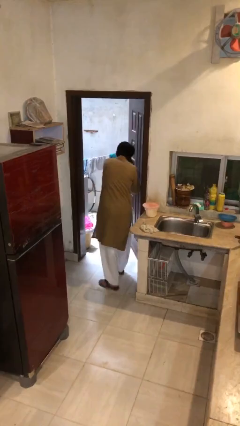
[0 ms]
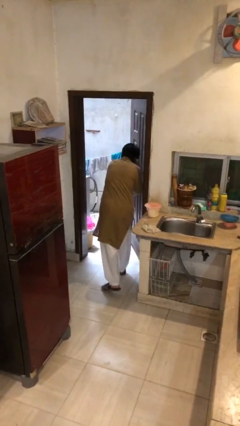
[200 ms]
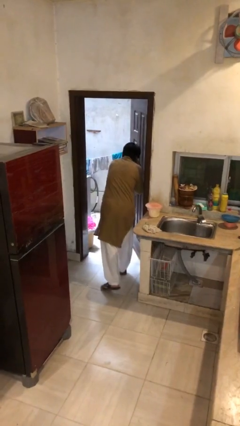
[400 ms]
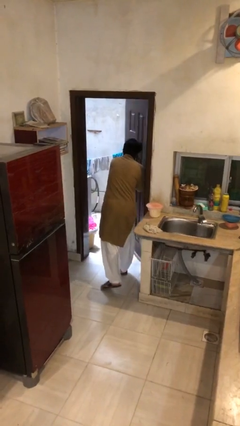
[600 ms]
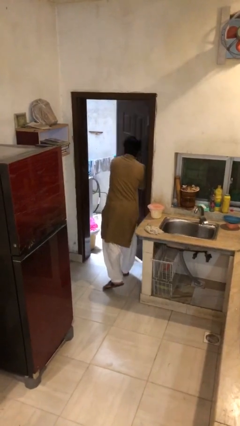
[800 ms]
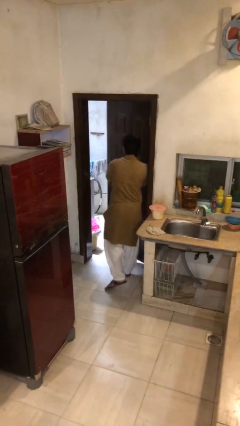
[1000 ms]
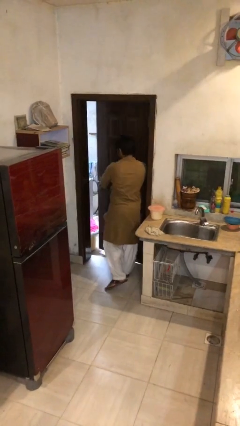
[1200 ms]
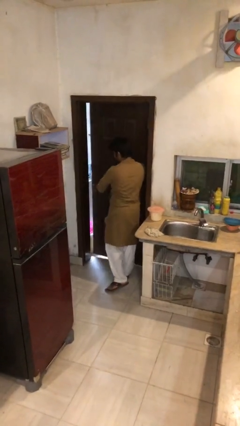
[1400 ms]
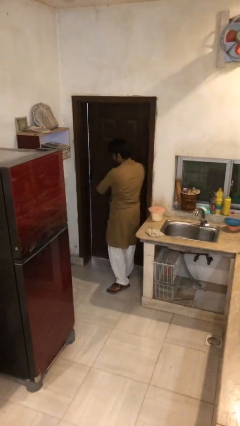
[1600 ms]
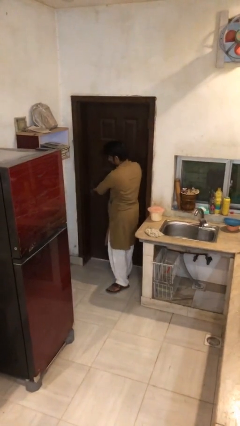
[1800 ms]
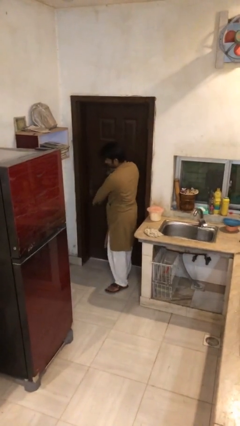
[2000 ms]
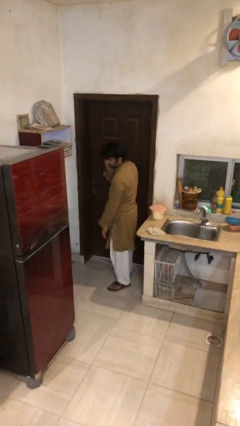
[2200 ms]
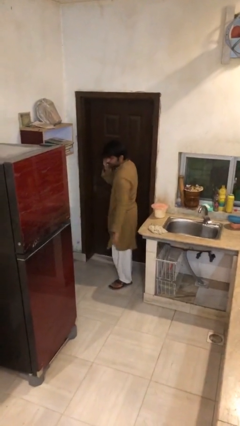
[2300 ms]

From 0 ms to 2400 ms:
person closes facility door

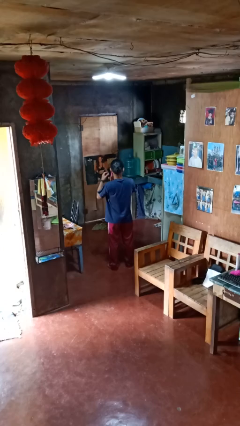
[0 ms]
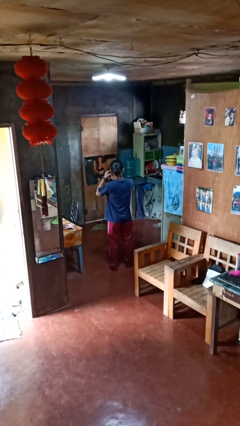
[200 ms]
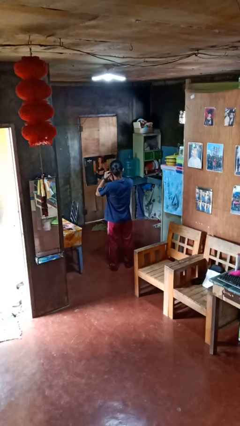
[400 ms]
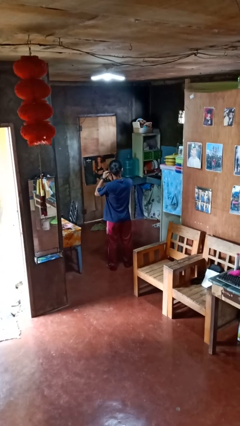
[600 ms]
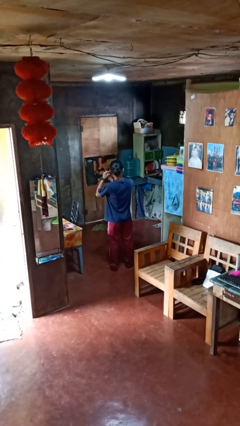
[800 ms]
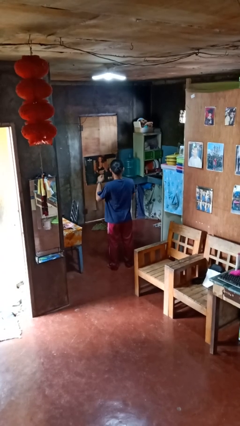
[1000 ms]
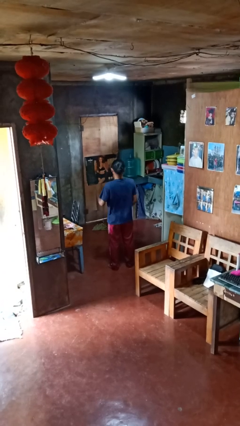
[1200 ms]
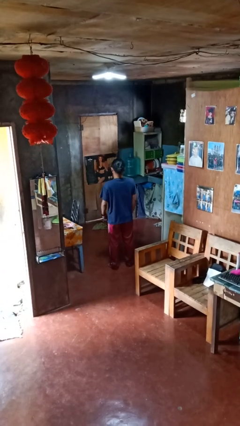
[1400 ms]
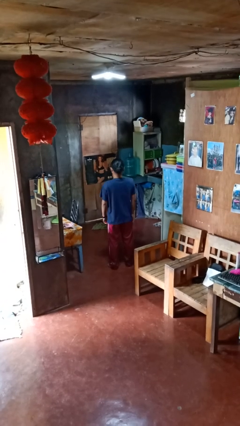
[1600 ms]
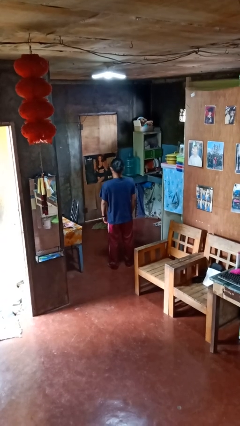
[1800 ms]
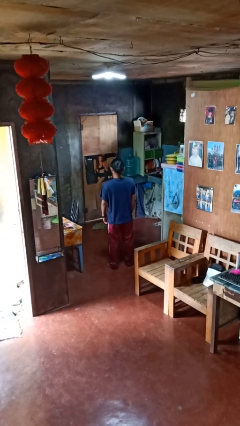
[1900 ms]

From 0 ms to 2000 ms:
person takes off earrings

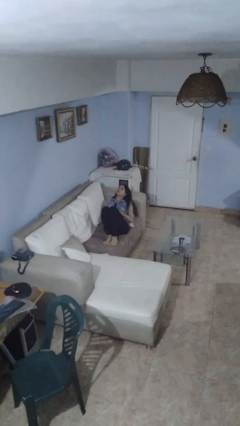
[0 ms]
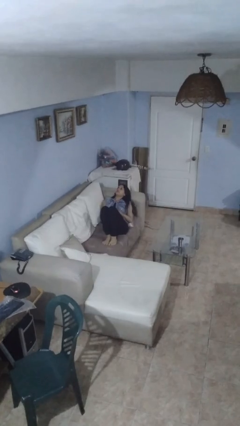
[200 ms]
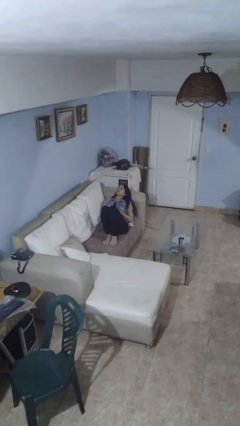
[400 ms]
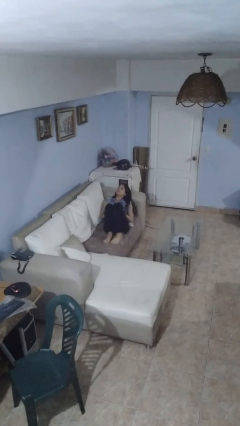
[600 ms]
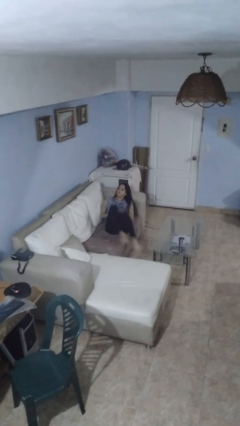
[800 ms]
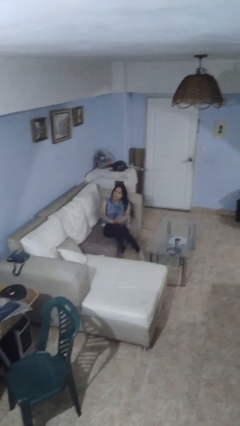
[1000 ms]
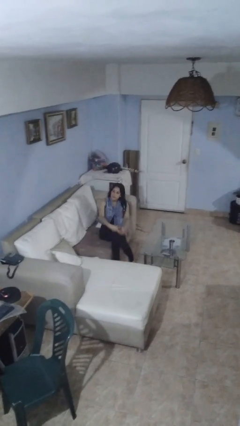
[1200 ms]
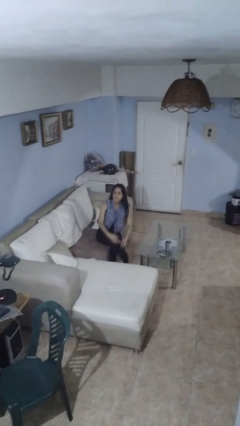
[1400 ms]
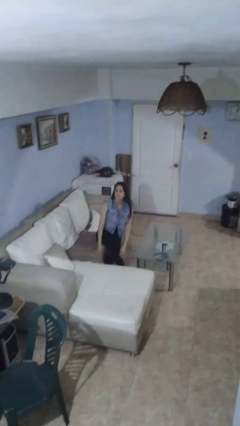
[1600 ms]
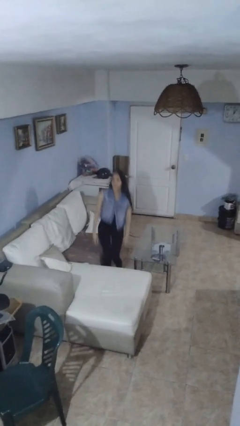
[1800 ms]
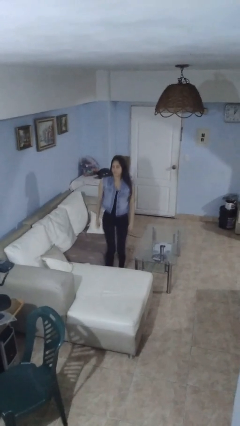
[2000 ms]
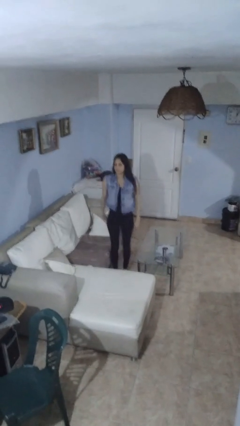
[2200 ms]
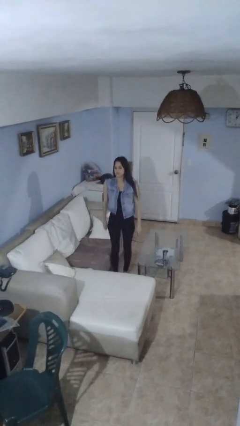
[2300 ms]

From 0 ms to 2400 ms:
person stands up

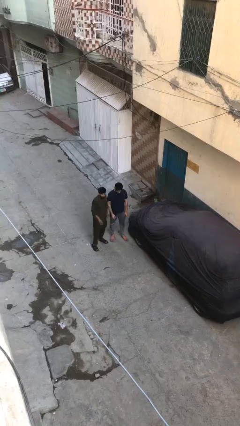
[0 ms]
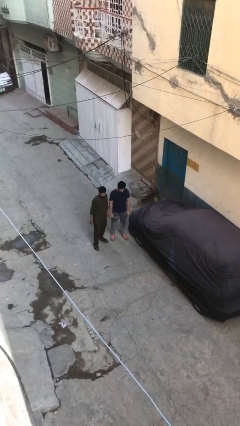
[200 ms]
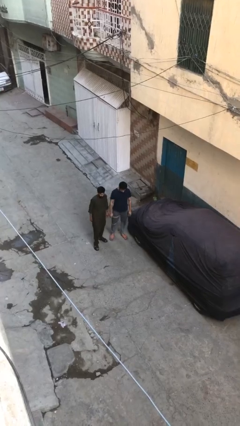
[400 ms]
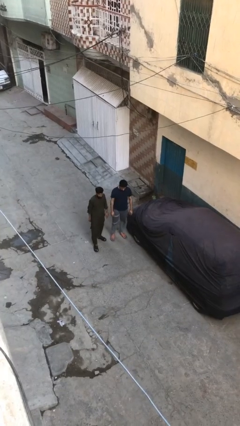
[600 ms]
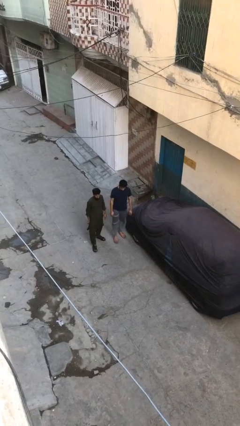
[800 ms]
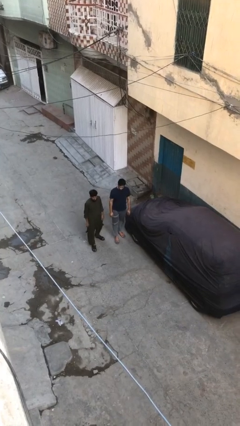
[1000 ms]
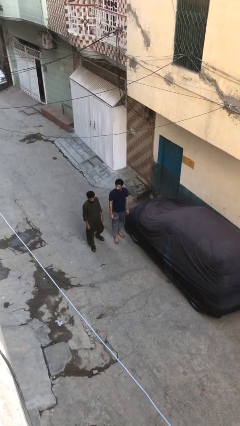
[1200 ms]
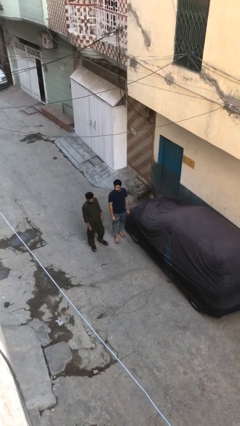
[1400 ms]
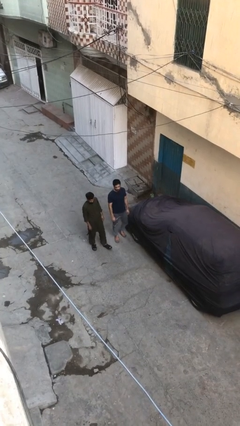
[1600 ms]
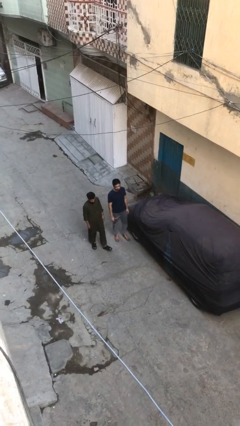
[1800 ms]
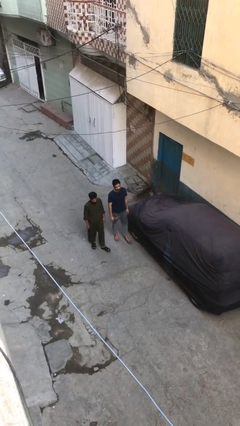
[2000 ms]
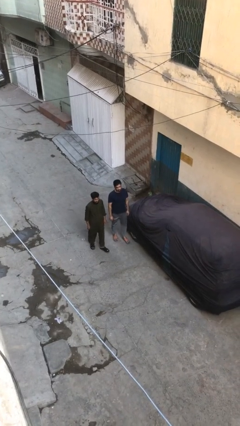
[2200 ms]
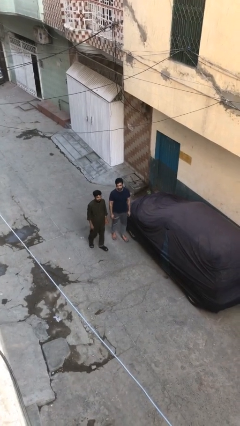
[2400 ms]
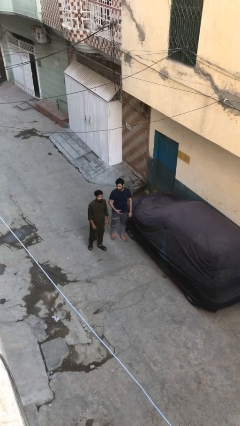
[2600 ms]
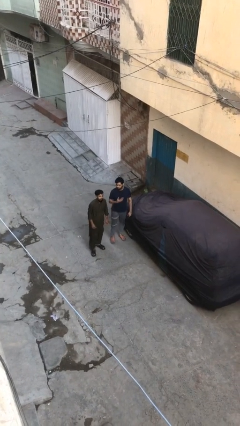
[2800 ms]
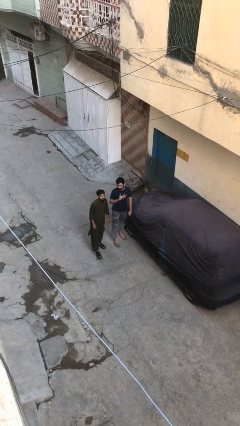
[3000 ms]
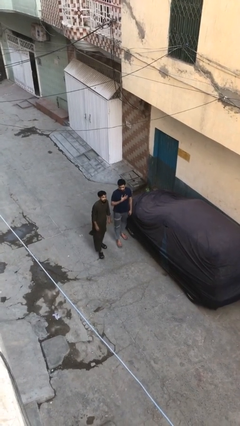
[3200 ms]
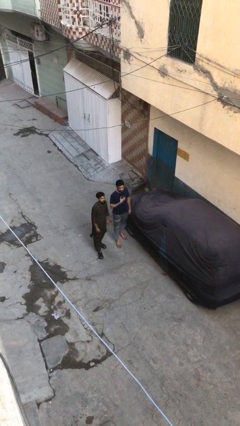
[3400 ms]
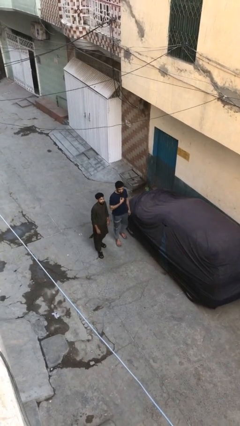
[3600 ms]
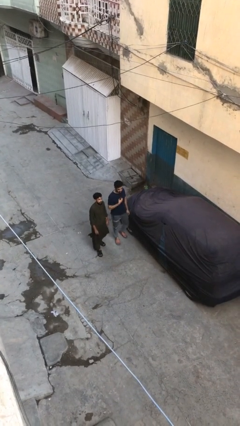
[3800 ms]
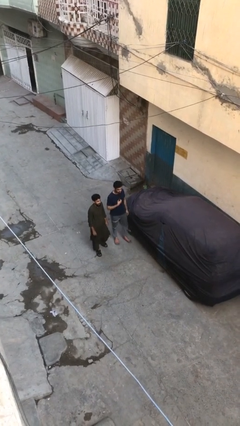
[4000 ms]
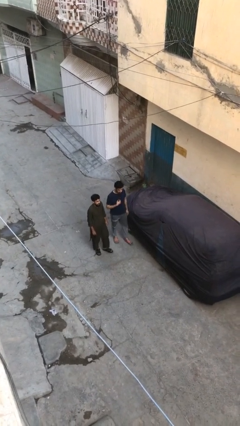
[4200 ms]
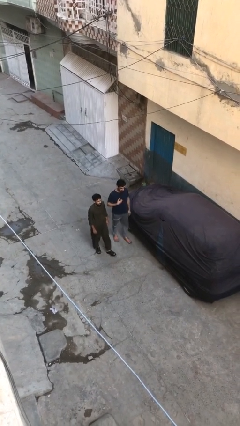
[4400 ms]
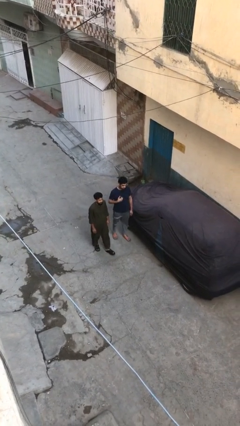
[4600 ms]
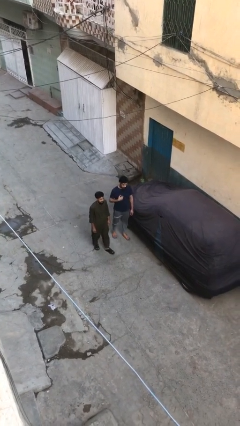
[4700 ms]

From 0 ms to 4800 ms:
person talks to person

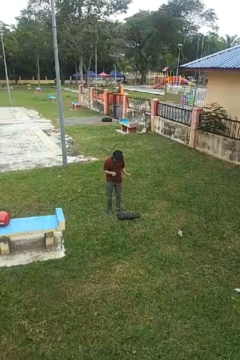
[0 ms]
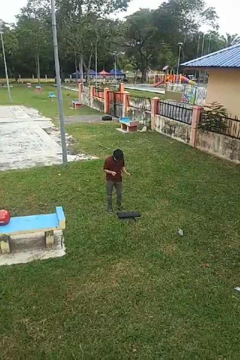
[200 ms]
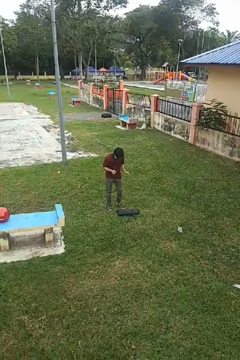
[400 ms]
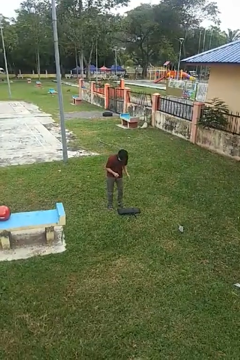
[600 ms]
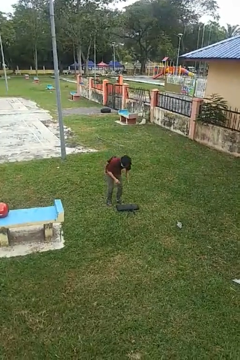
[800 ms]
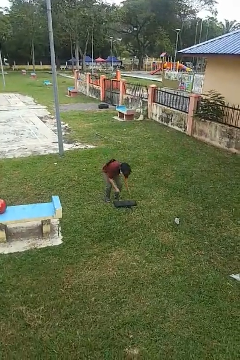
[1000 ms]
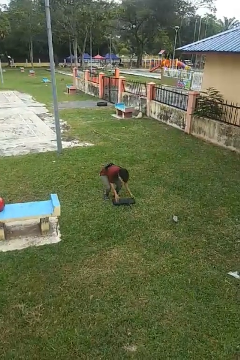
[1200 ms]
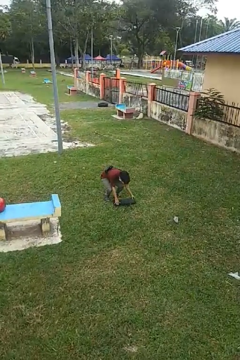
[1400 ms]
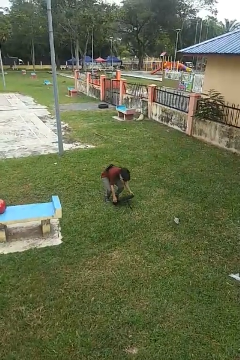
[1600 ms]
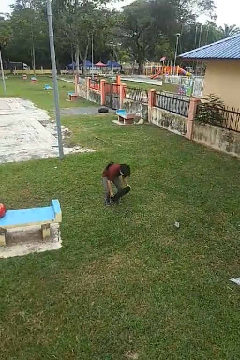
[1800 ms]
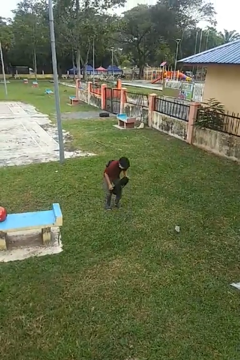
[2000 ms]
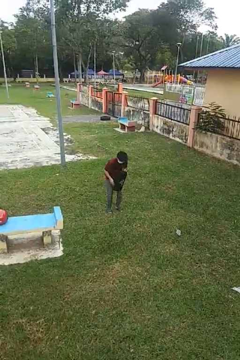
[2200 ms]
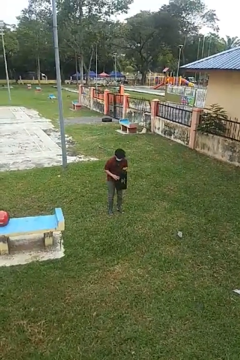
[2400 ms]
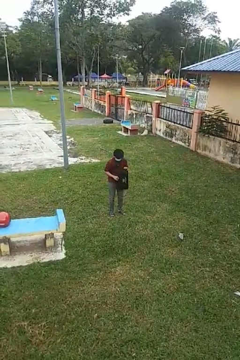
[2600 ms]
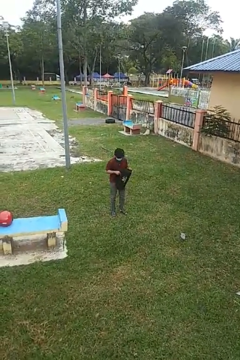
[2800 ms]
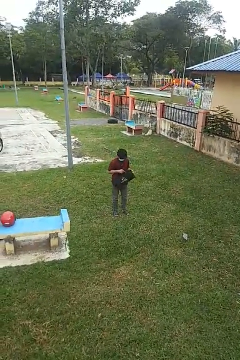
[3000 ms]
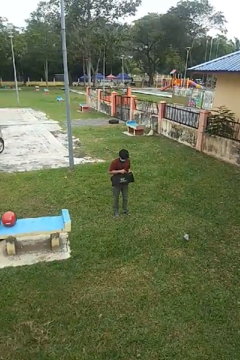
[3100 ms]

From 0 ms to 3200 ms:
person picks up object from floor

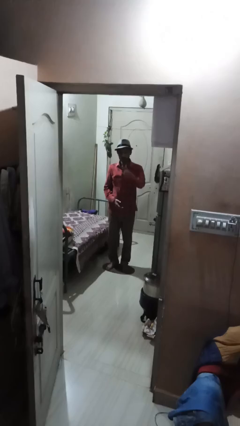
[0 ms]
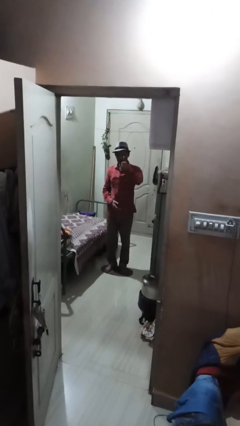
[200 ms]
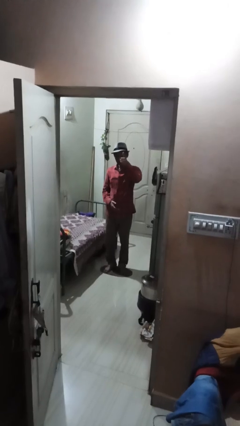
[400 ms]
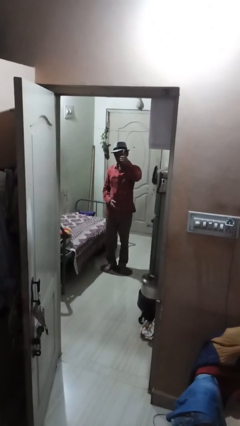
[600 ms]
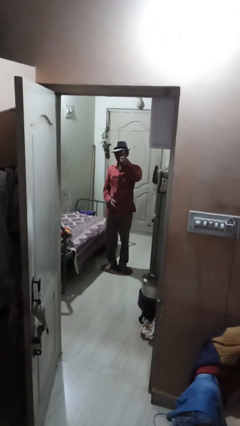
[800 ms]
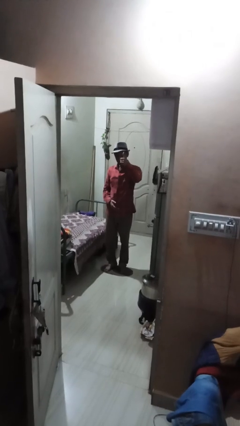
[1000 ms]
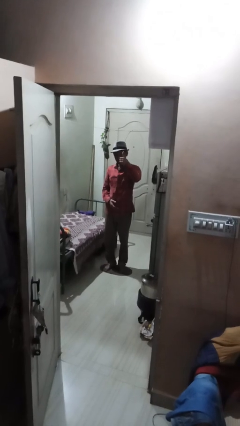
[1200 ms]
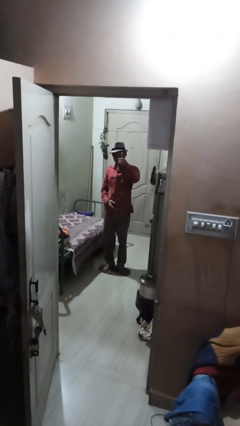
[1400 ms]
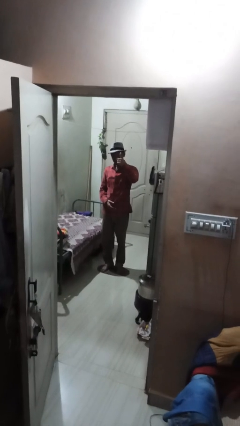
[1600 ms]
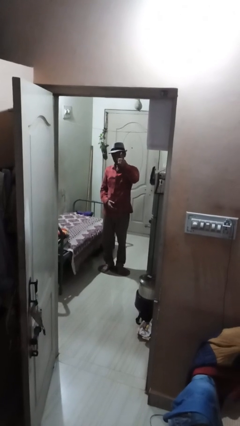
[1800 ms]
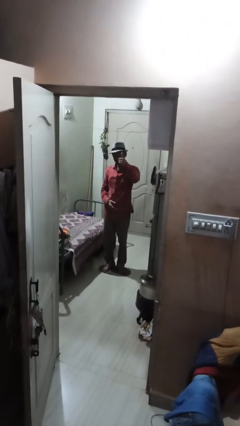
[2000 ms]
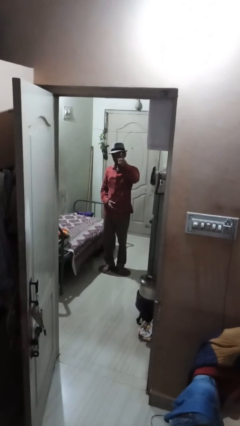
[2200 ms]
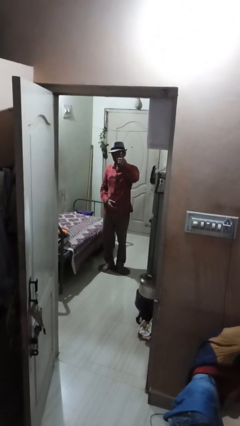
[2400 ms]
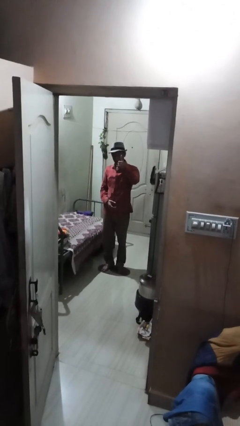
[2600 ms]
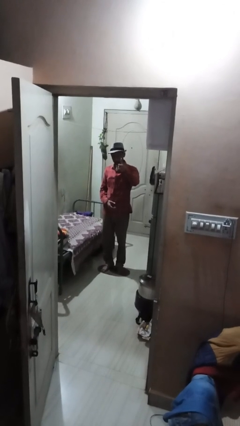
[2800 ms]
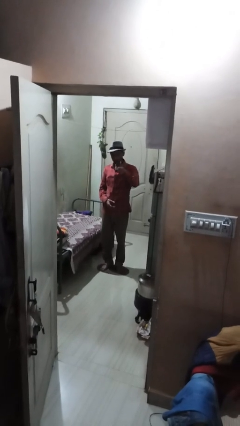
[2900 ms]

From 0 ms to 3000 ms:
person gestures thumbs up

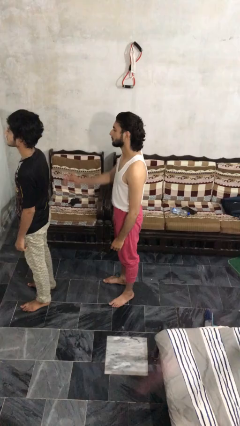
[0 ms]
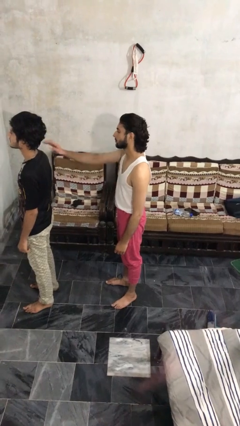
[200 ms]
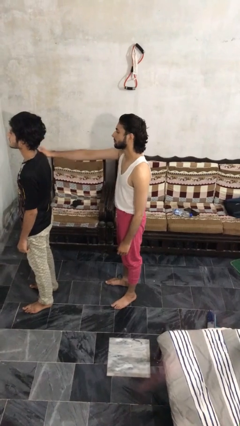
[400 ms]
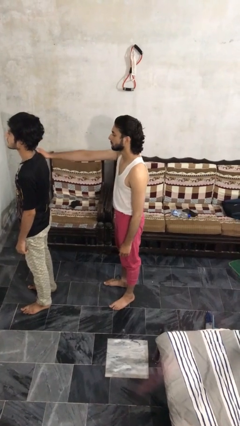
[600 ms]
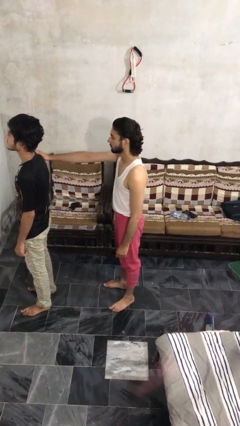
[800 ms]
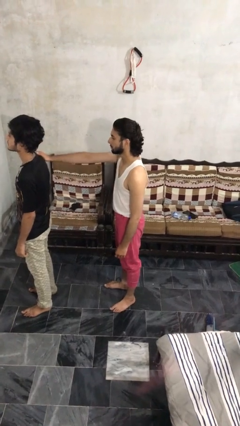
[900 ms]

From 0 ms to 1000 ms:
person grabs person by shoulder
